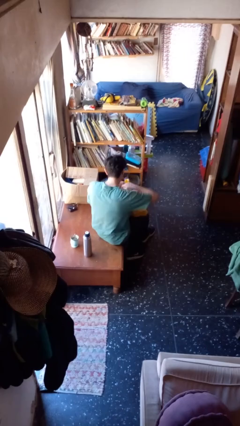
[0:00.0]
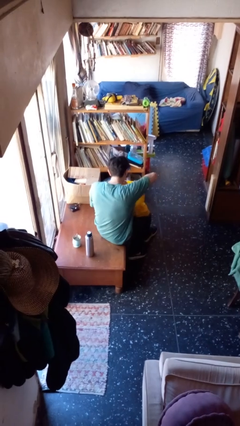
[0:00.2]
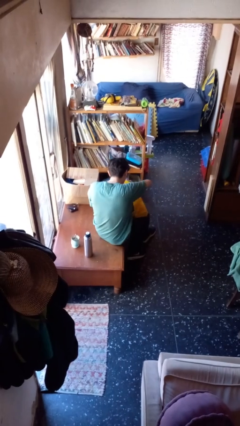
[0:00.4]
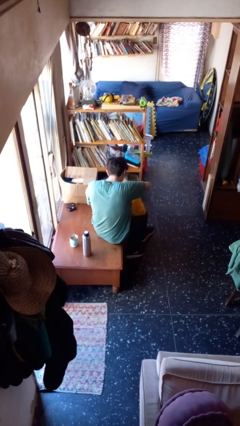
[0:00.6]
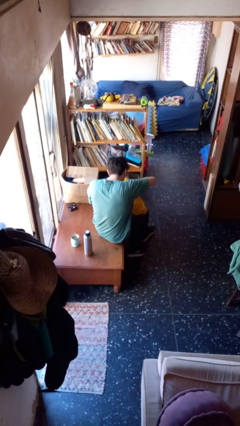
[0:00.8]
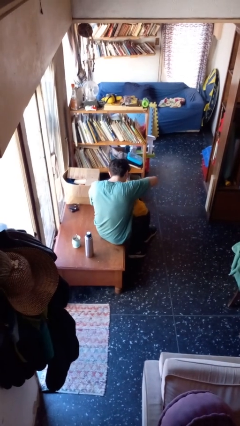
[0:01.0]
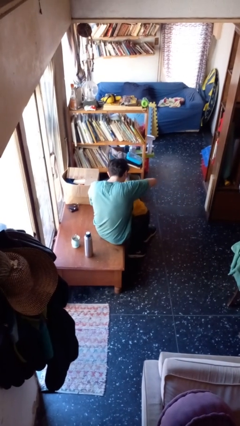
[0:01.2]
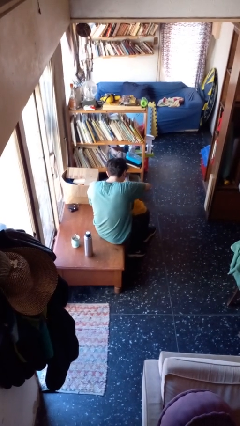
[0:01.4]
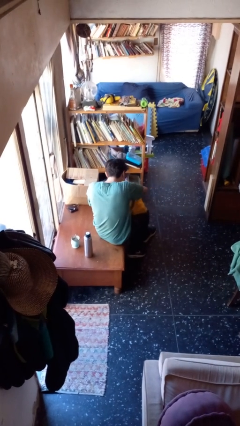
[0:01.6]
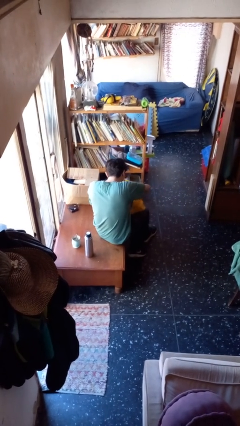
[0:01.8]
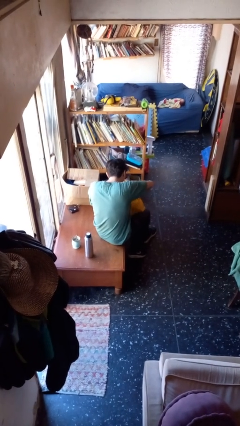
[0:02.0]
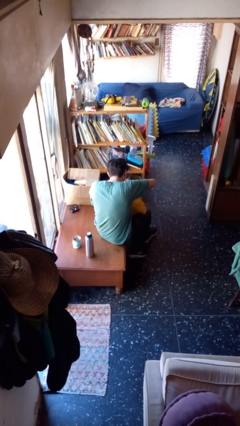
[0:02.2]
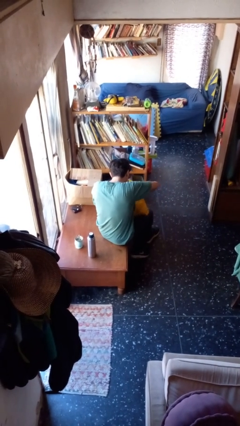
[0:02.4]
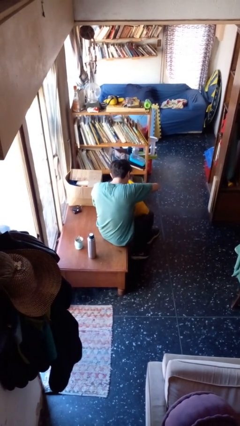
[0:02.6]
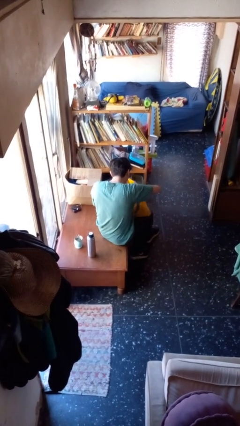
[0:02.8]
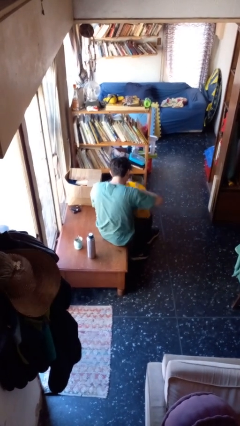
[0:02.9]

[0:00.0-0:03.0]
person searches in bag

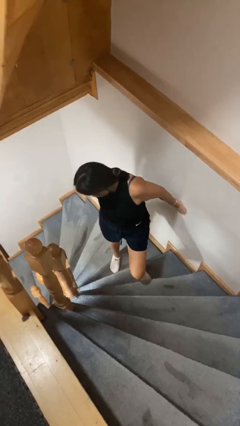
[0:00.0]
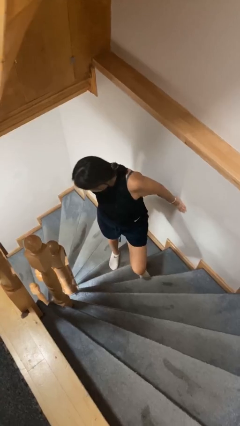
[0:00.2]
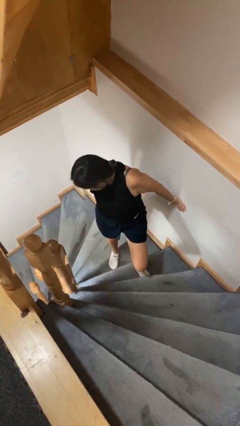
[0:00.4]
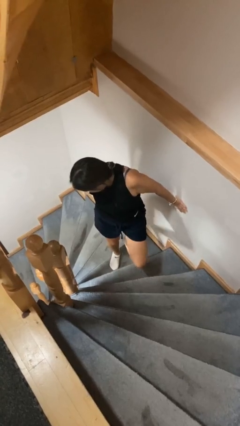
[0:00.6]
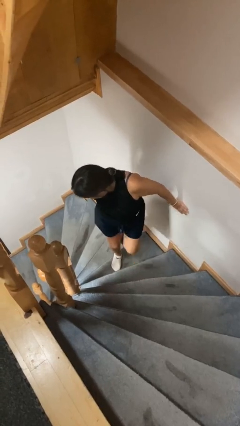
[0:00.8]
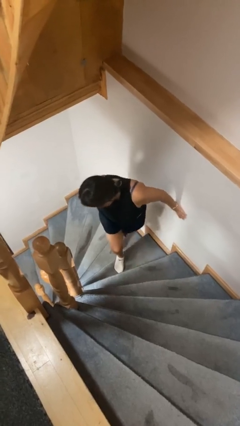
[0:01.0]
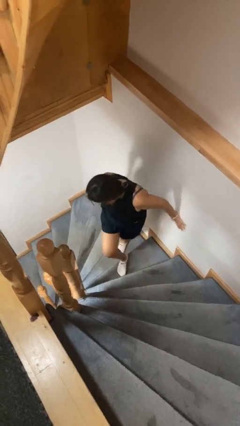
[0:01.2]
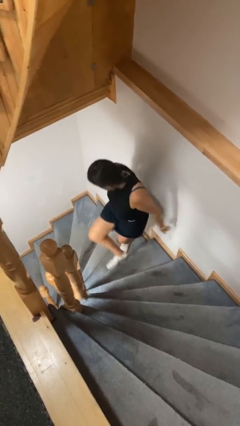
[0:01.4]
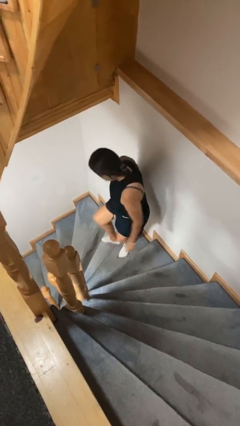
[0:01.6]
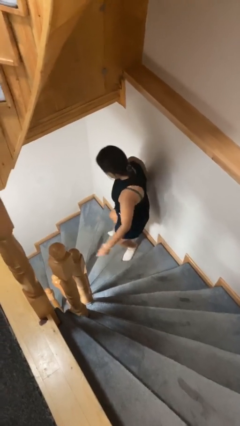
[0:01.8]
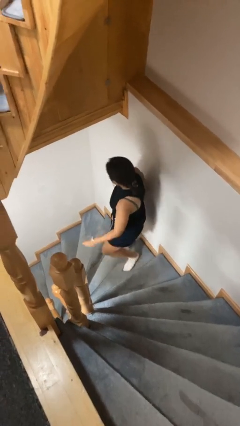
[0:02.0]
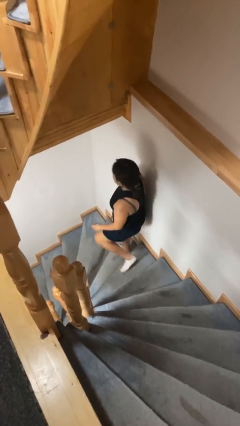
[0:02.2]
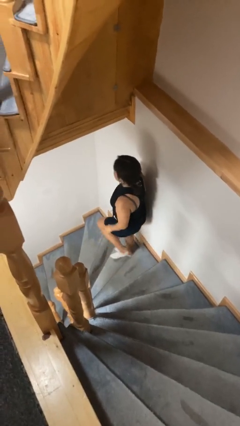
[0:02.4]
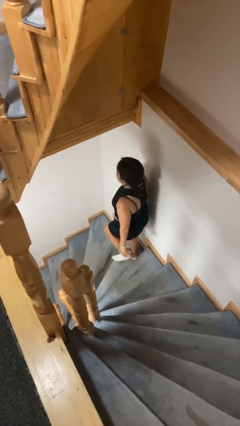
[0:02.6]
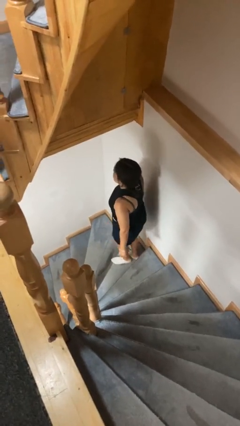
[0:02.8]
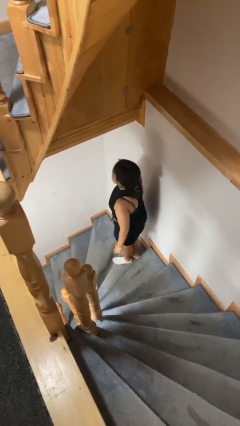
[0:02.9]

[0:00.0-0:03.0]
person climbs down stairs

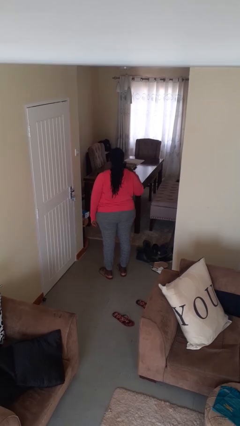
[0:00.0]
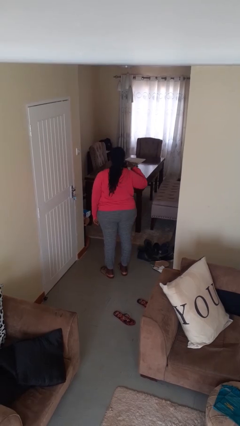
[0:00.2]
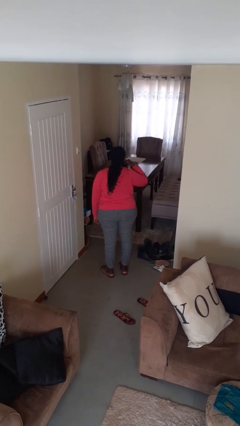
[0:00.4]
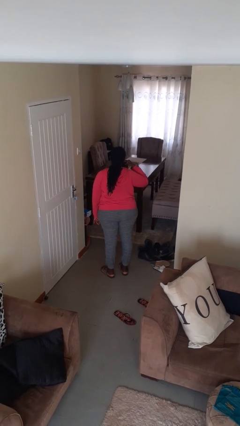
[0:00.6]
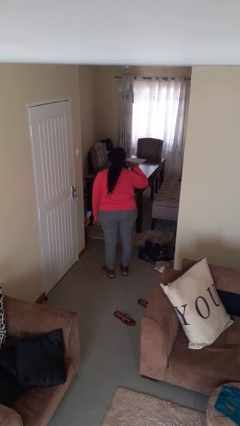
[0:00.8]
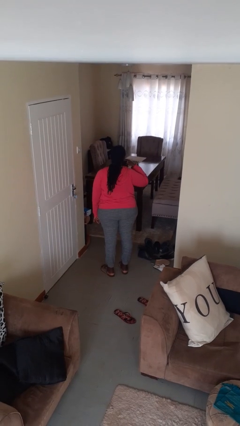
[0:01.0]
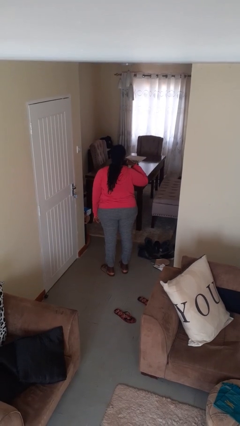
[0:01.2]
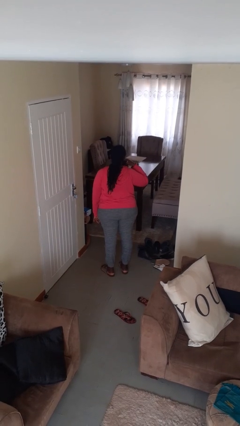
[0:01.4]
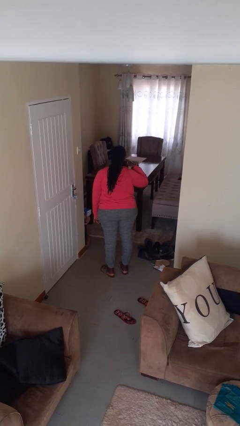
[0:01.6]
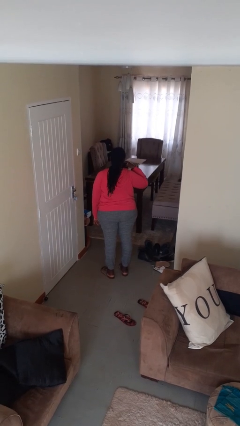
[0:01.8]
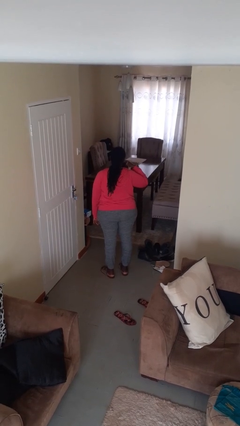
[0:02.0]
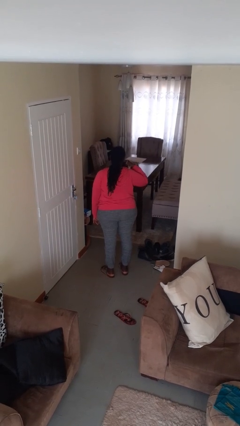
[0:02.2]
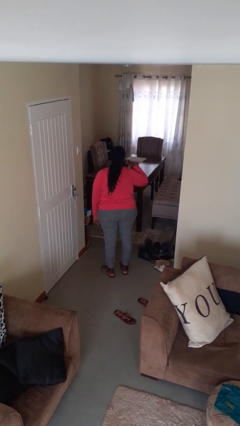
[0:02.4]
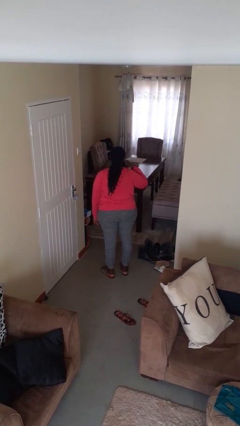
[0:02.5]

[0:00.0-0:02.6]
person gestures call me

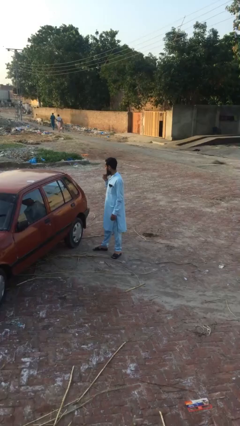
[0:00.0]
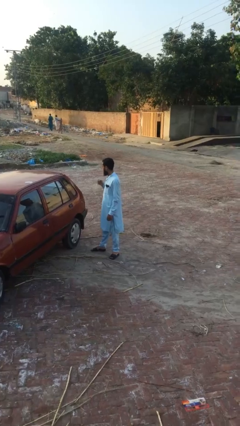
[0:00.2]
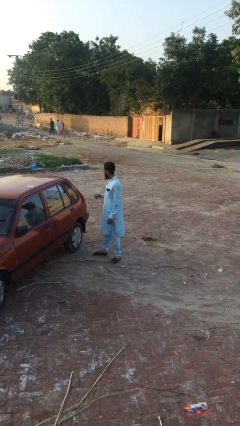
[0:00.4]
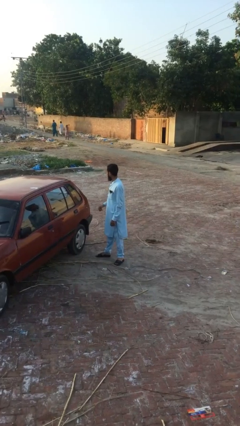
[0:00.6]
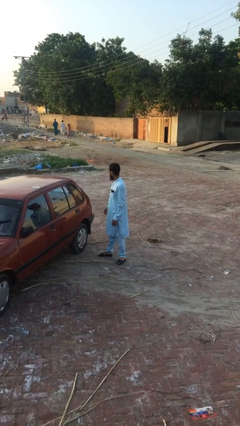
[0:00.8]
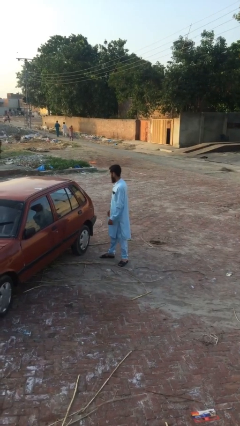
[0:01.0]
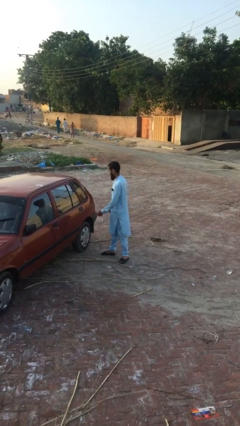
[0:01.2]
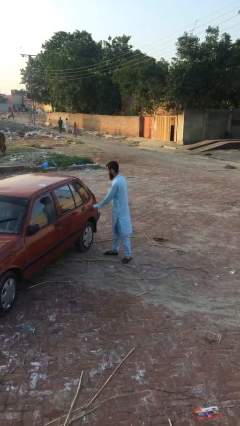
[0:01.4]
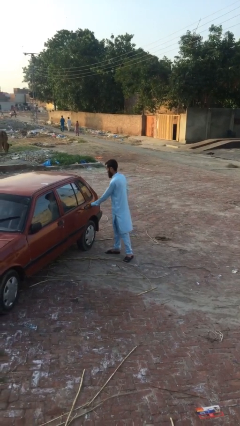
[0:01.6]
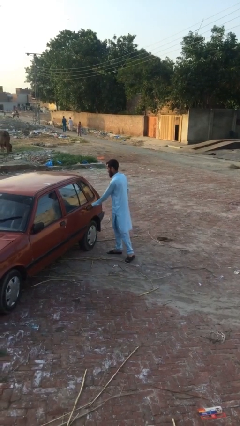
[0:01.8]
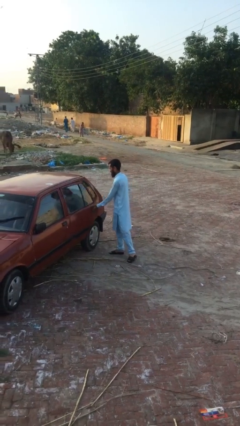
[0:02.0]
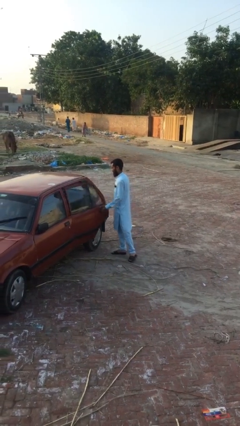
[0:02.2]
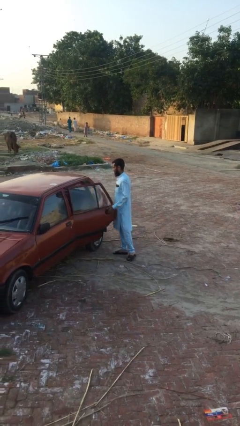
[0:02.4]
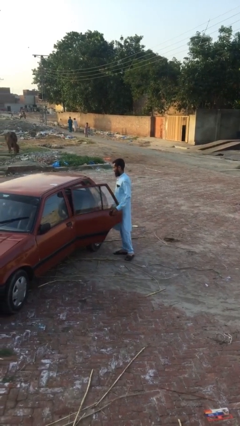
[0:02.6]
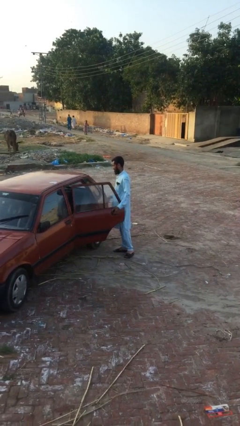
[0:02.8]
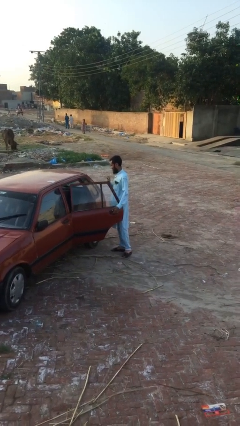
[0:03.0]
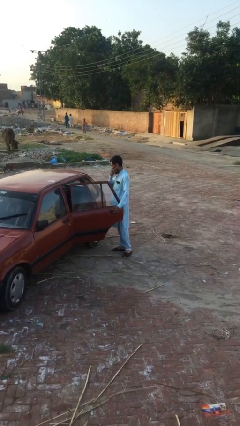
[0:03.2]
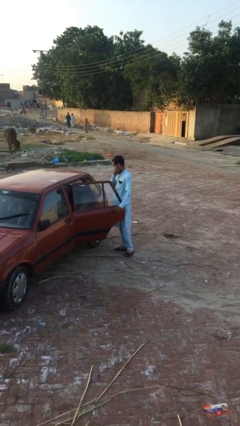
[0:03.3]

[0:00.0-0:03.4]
person opens car door

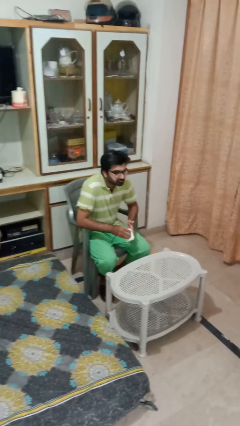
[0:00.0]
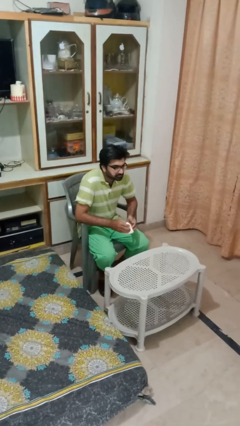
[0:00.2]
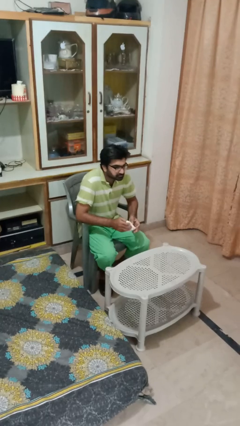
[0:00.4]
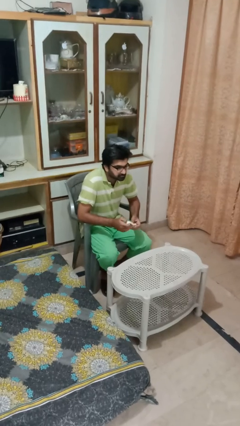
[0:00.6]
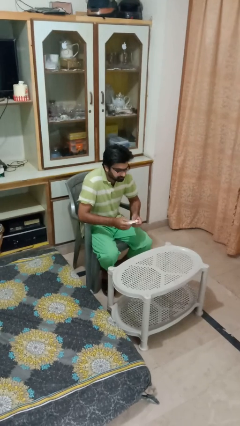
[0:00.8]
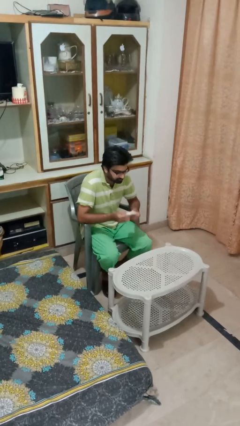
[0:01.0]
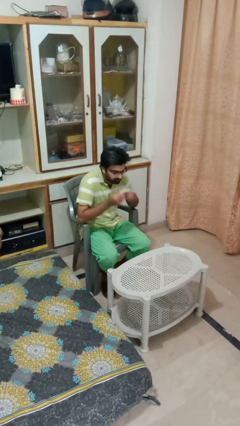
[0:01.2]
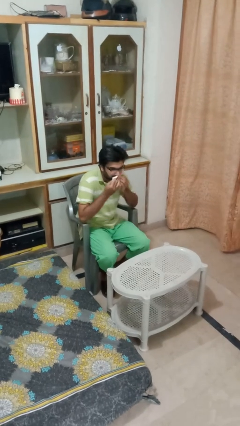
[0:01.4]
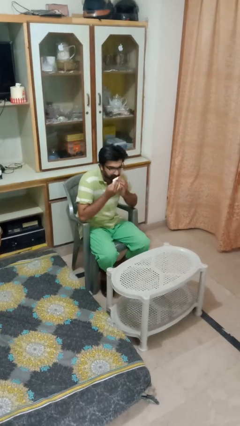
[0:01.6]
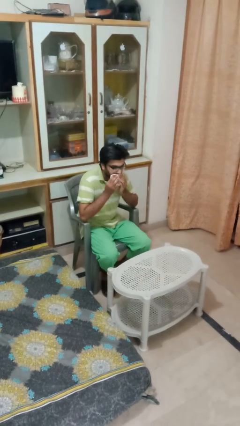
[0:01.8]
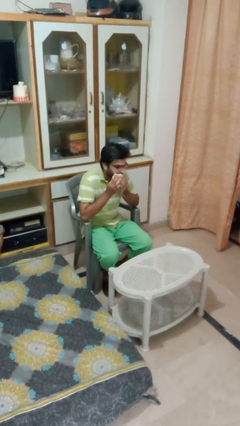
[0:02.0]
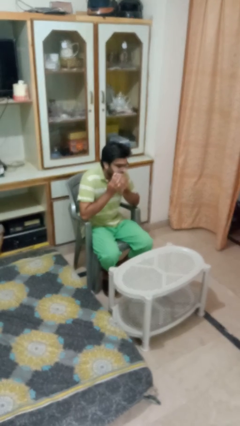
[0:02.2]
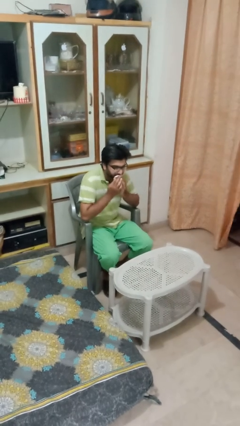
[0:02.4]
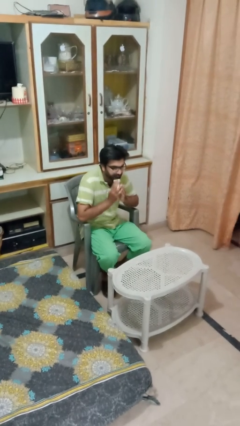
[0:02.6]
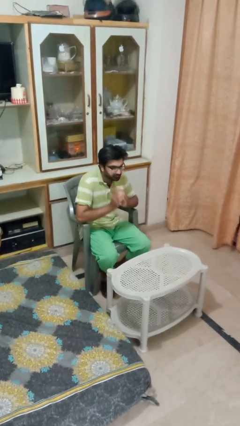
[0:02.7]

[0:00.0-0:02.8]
person wipes mouth with napkin

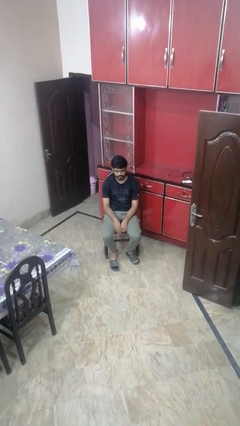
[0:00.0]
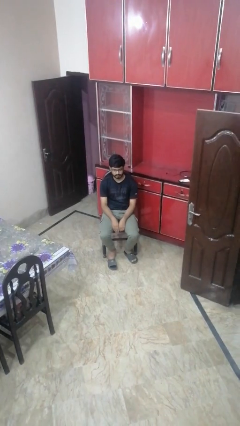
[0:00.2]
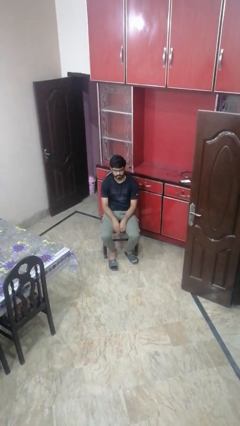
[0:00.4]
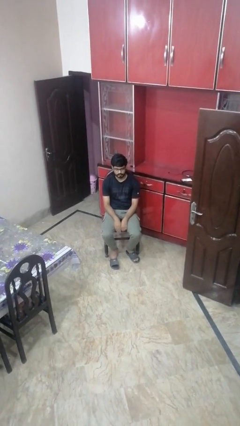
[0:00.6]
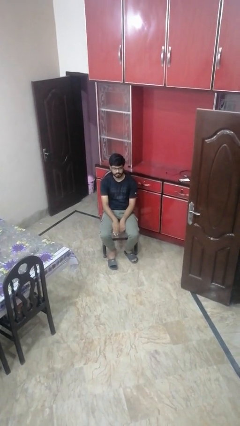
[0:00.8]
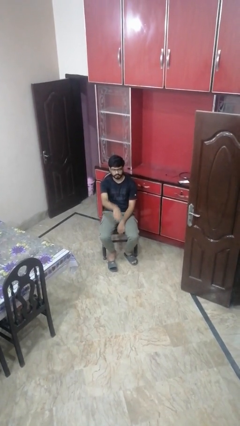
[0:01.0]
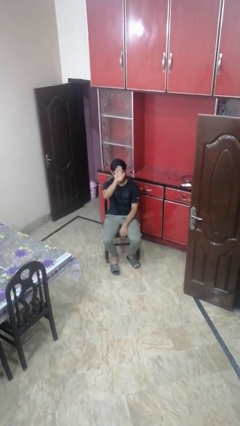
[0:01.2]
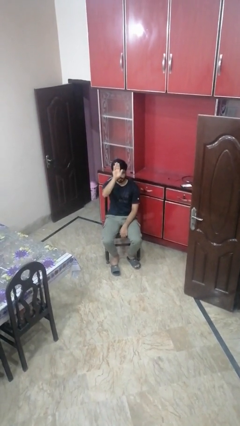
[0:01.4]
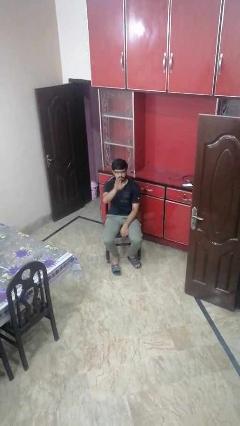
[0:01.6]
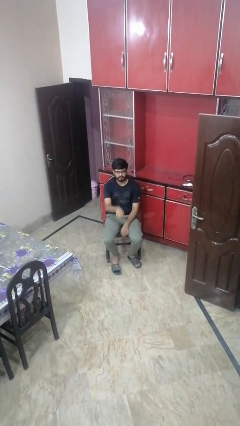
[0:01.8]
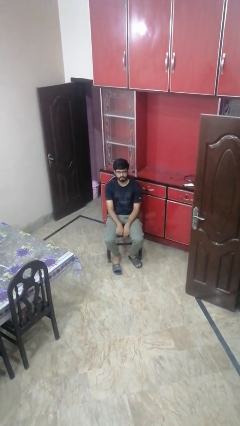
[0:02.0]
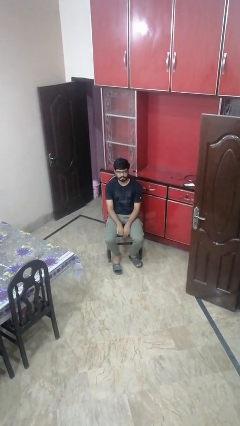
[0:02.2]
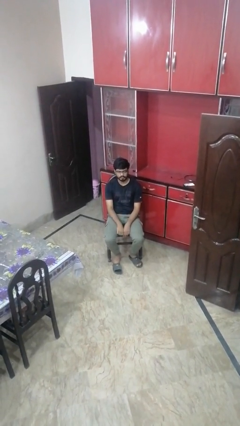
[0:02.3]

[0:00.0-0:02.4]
person gestures swipe up
